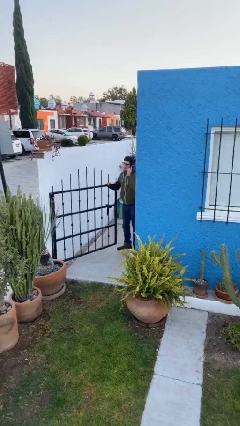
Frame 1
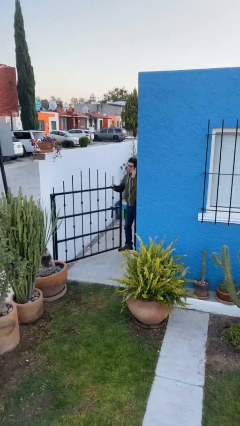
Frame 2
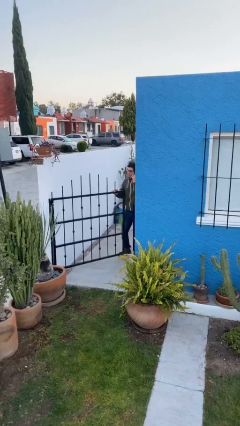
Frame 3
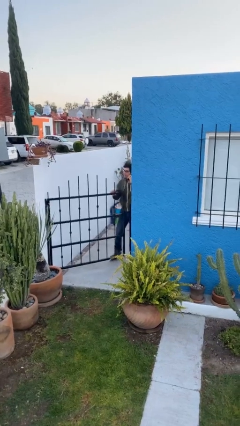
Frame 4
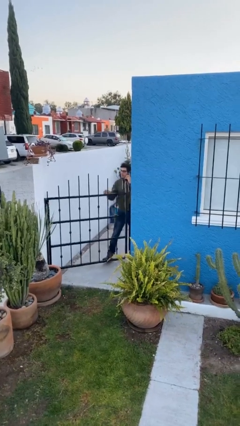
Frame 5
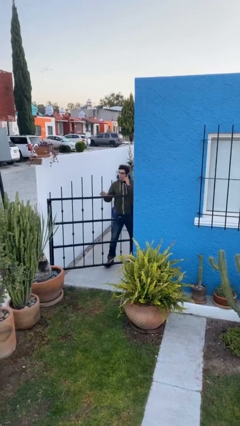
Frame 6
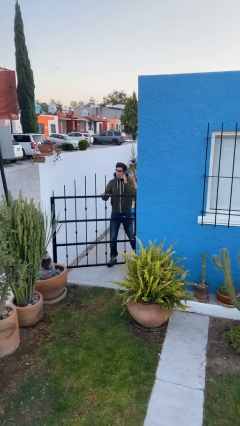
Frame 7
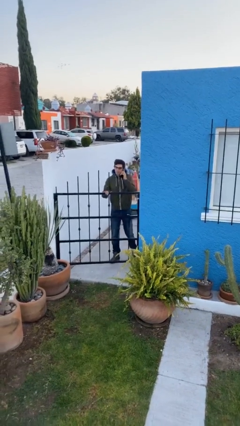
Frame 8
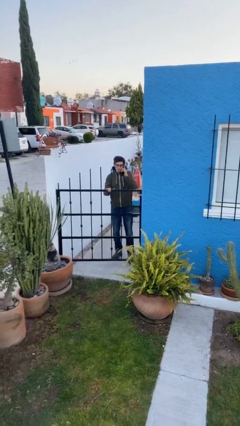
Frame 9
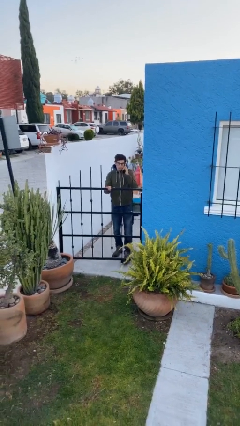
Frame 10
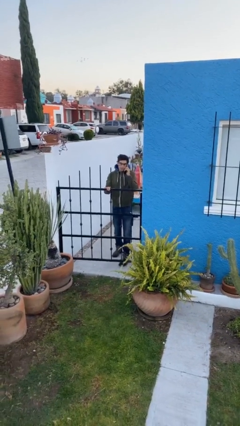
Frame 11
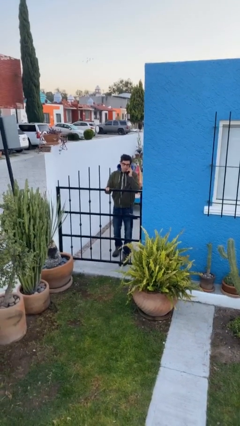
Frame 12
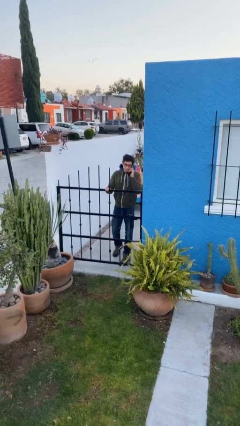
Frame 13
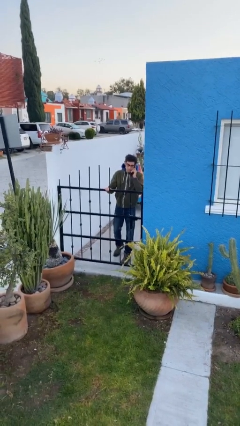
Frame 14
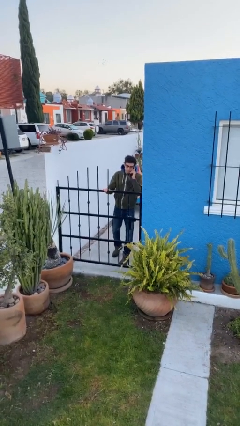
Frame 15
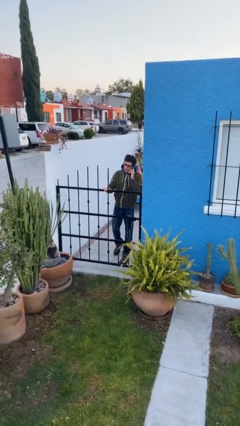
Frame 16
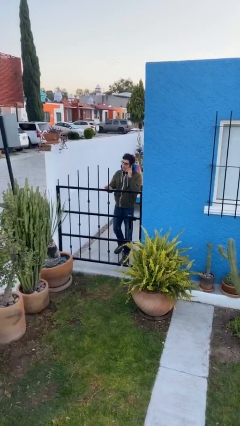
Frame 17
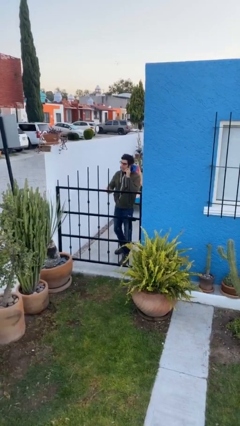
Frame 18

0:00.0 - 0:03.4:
person closes facility door

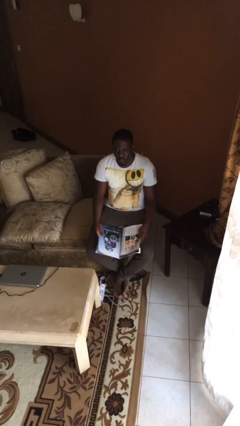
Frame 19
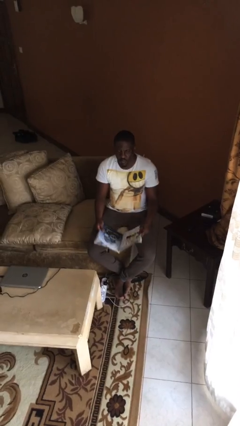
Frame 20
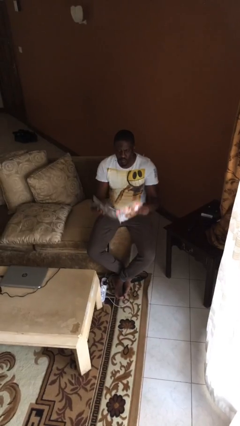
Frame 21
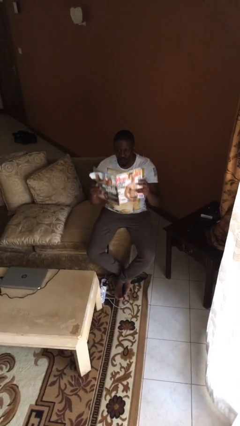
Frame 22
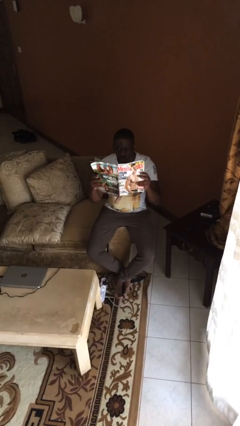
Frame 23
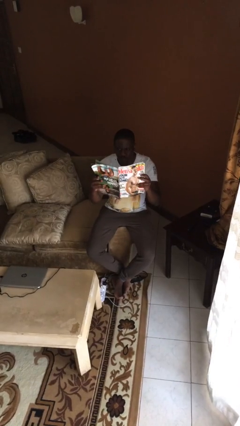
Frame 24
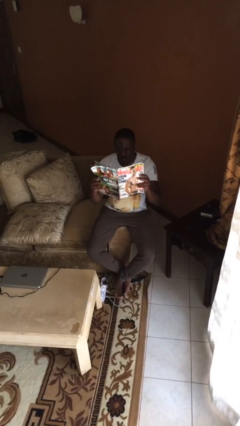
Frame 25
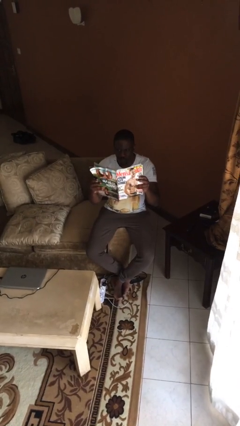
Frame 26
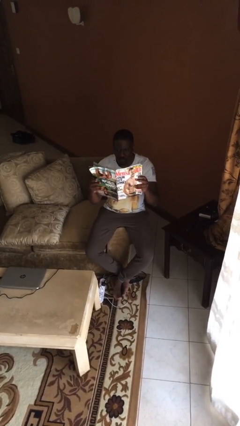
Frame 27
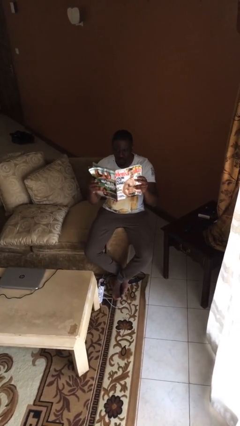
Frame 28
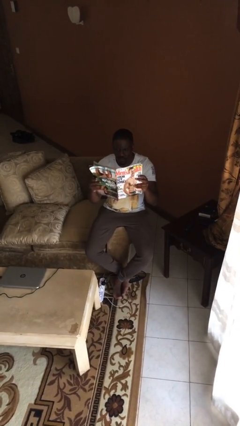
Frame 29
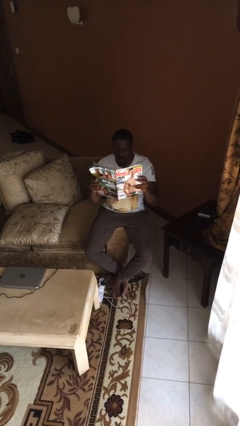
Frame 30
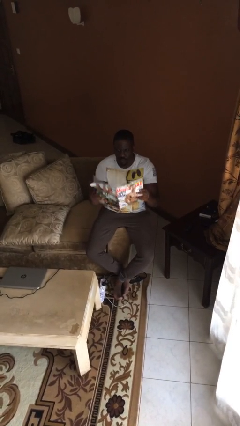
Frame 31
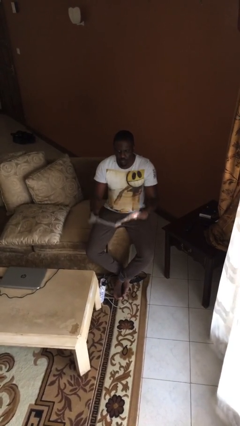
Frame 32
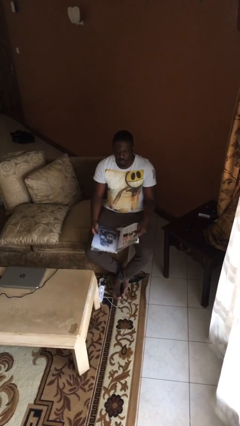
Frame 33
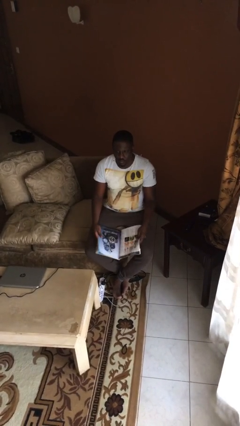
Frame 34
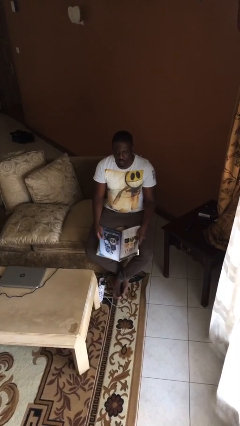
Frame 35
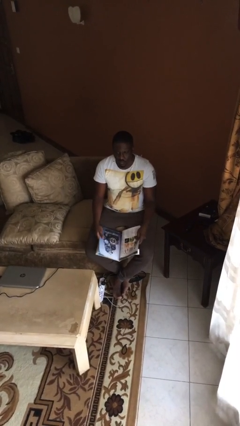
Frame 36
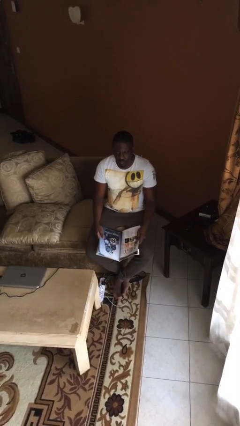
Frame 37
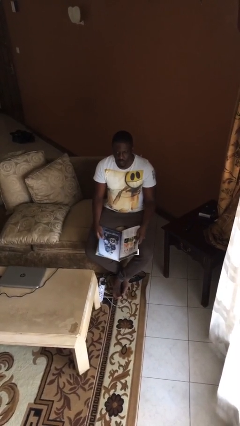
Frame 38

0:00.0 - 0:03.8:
person reads document

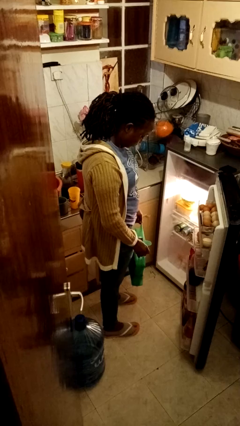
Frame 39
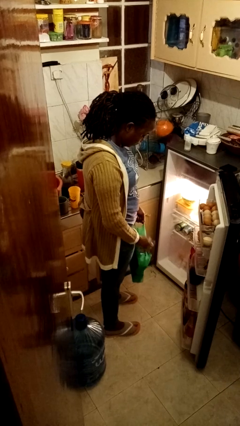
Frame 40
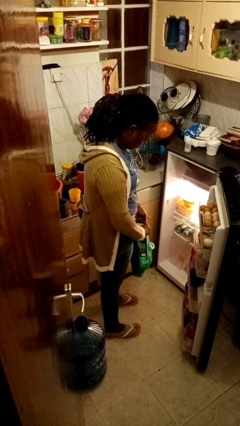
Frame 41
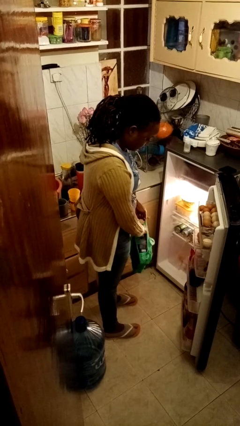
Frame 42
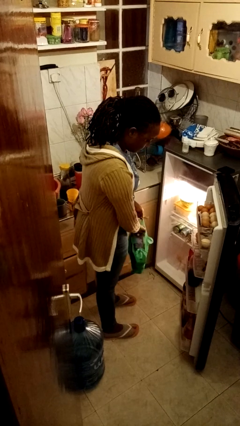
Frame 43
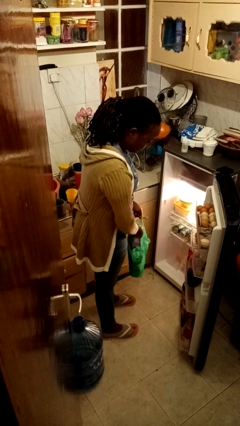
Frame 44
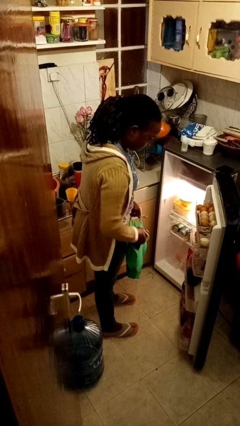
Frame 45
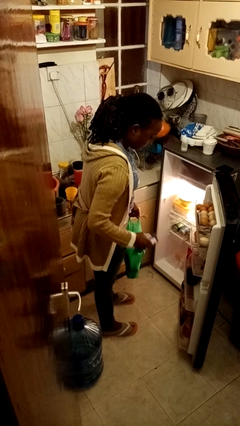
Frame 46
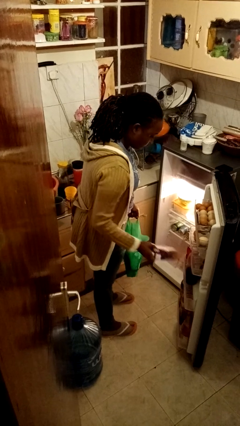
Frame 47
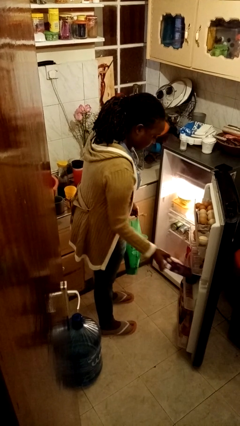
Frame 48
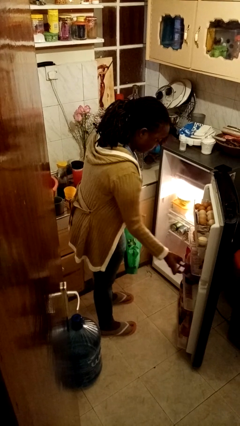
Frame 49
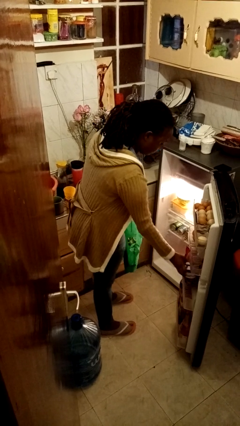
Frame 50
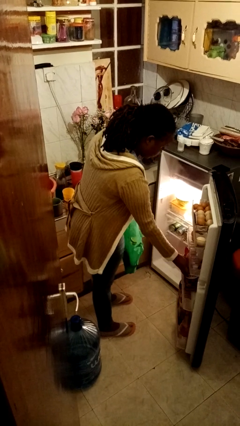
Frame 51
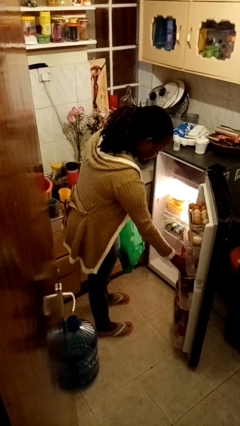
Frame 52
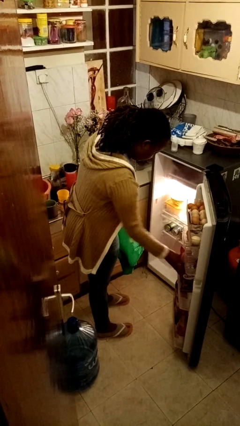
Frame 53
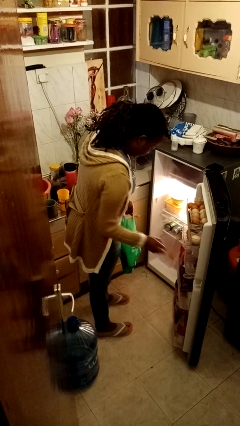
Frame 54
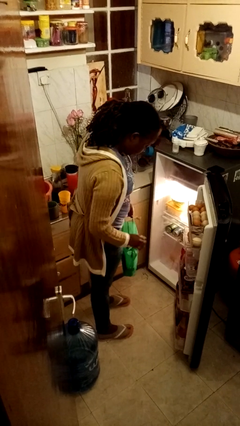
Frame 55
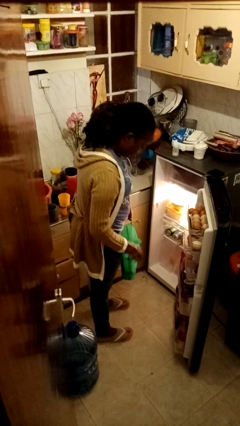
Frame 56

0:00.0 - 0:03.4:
person loads groceries into refrigerator

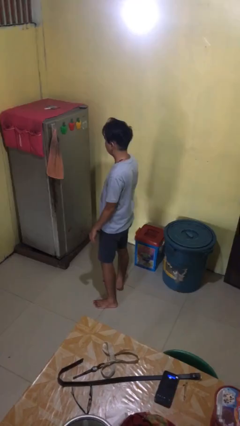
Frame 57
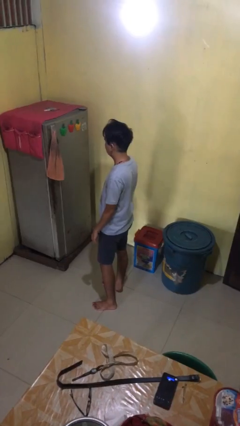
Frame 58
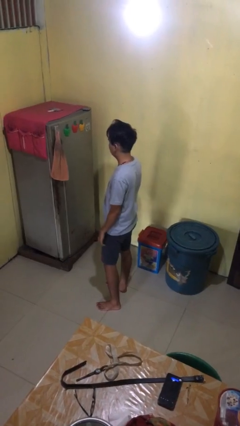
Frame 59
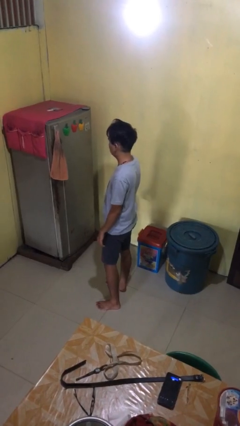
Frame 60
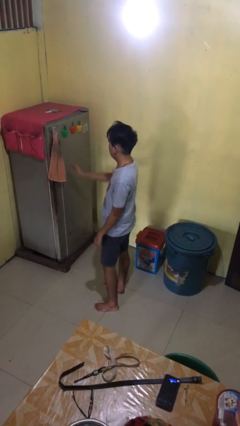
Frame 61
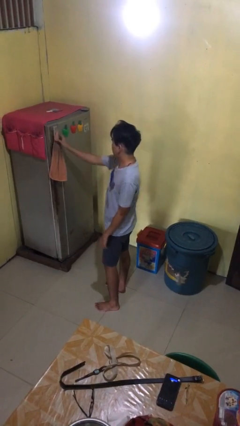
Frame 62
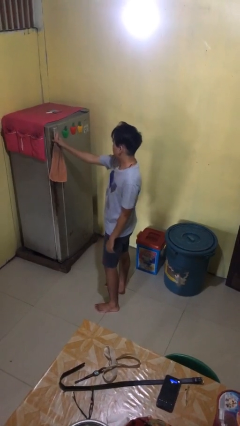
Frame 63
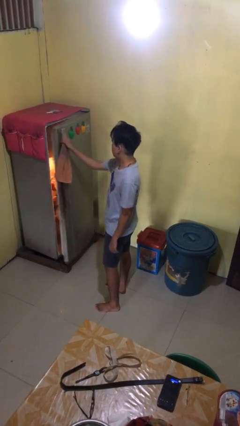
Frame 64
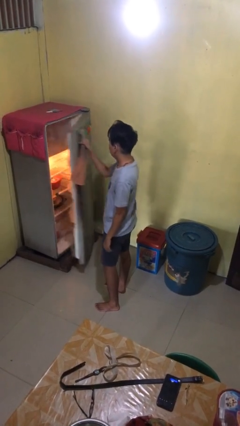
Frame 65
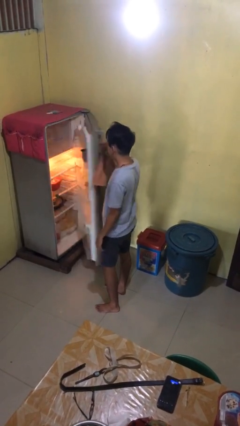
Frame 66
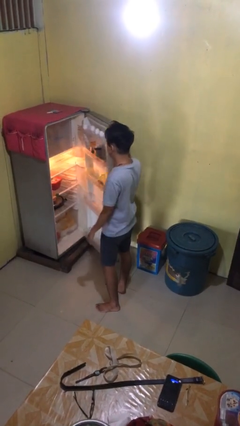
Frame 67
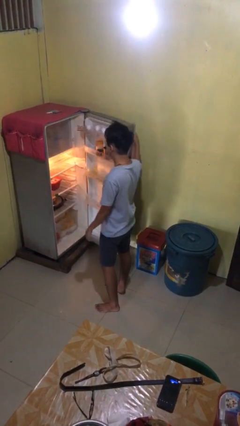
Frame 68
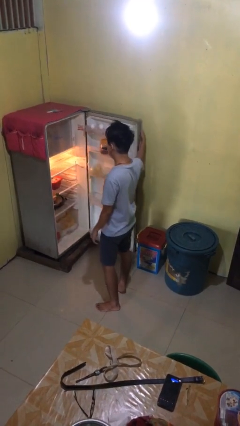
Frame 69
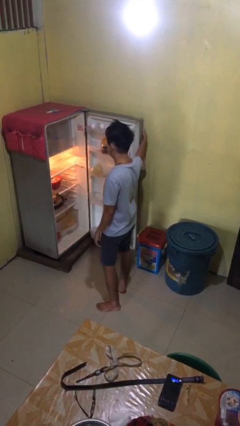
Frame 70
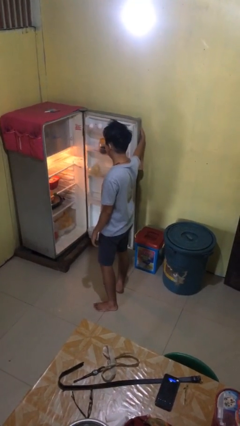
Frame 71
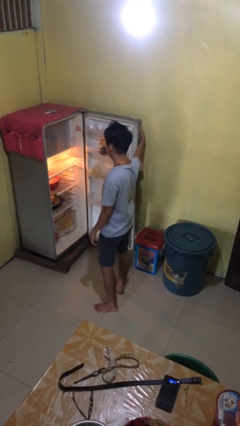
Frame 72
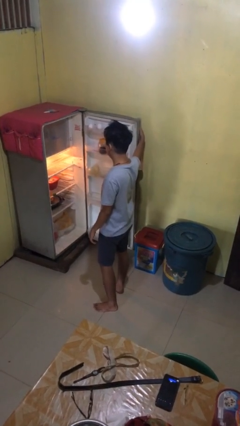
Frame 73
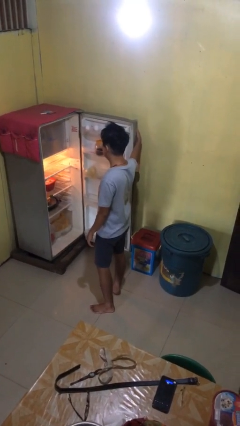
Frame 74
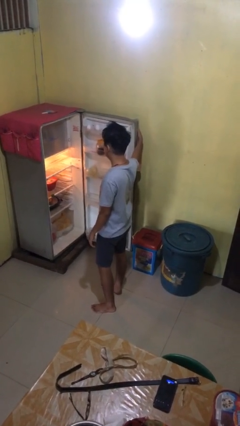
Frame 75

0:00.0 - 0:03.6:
person opens refrigerator

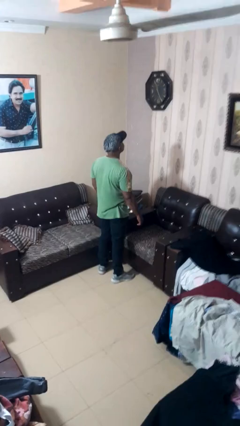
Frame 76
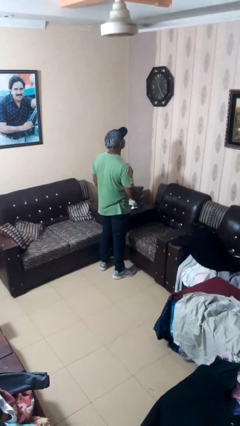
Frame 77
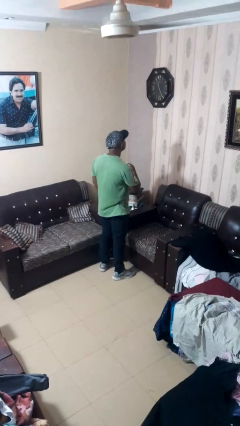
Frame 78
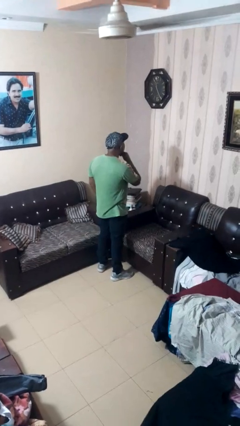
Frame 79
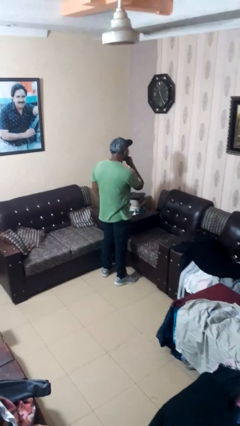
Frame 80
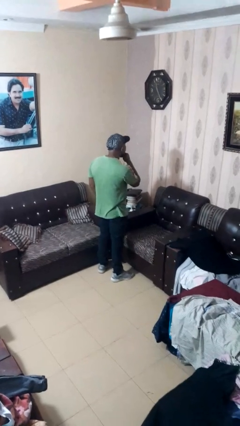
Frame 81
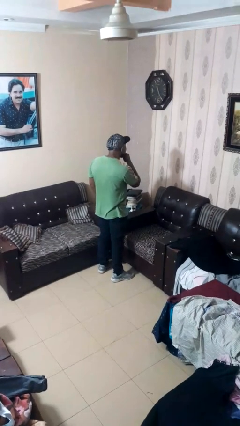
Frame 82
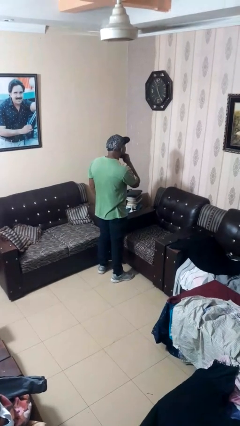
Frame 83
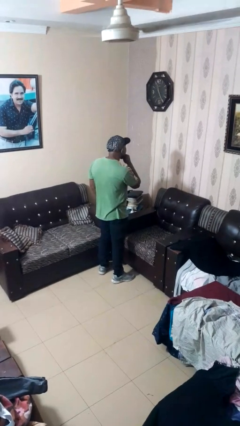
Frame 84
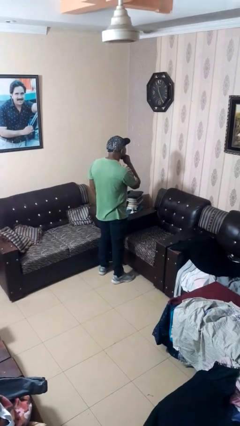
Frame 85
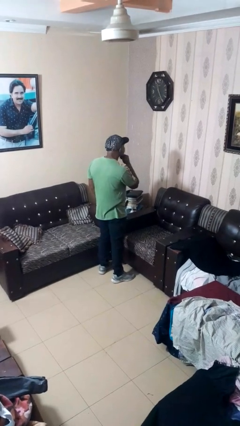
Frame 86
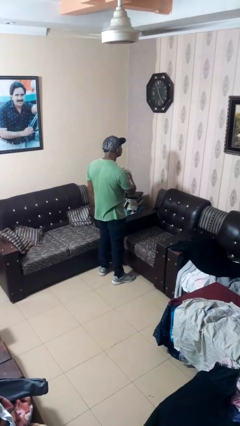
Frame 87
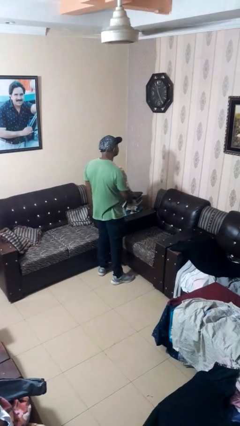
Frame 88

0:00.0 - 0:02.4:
person strokes chin

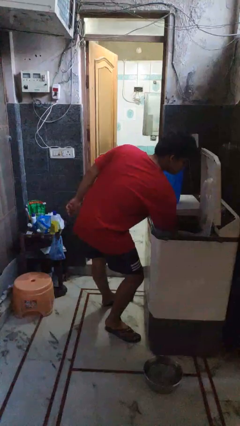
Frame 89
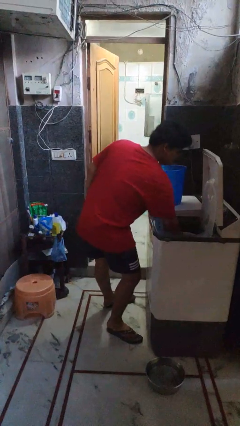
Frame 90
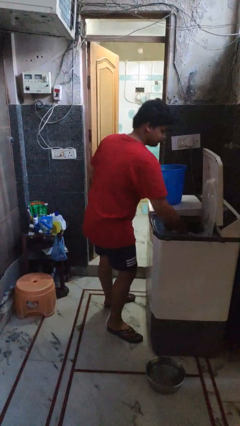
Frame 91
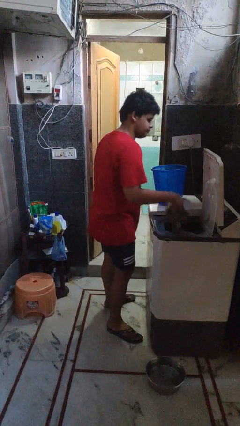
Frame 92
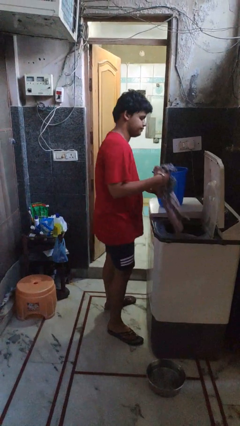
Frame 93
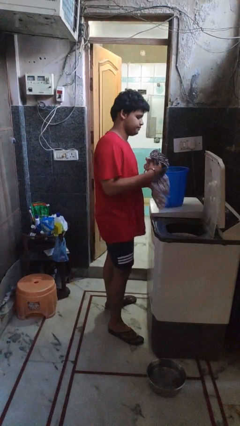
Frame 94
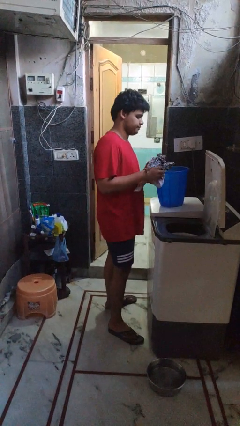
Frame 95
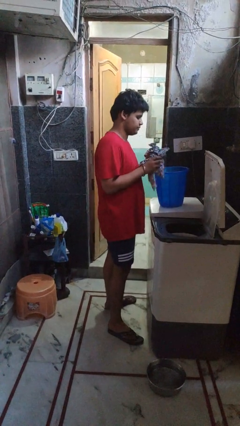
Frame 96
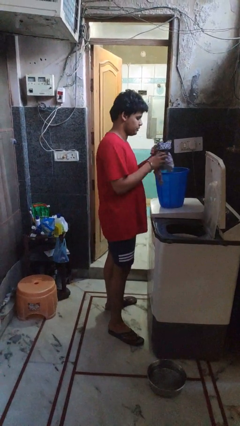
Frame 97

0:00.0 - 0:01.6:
person unloads dryer
